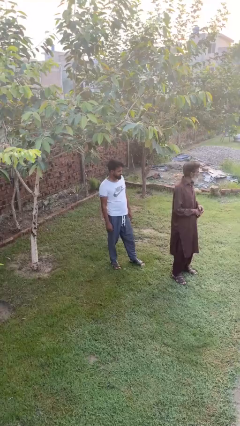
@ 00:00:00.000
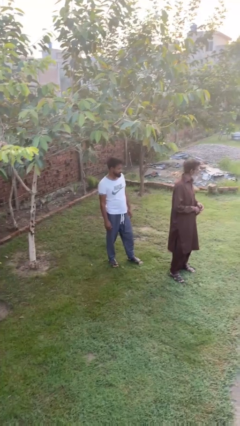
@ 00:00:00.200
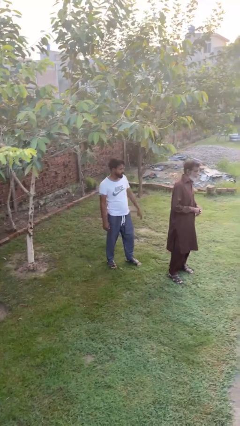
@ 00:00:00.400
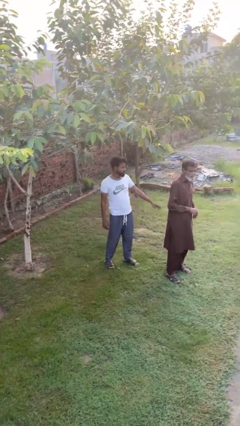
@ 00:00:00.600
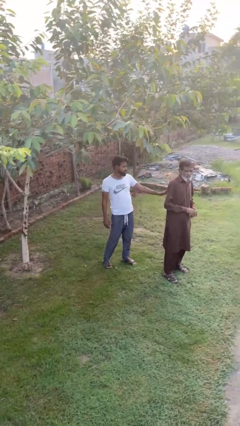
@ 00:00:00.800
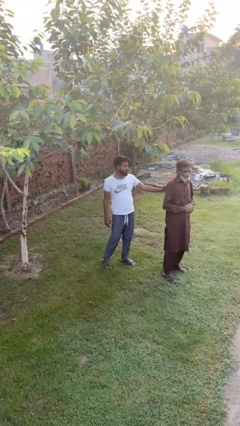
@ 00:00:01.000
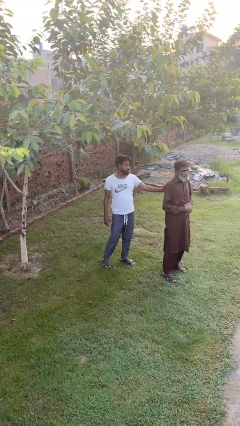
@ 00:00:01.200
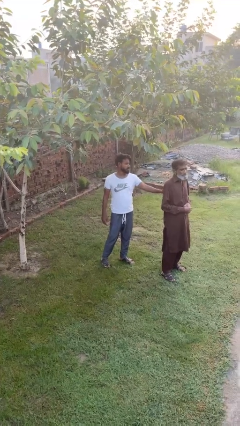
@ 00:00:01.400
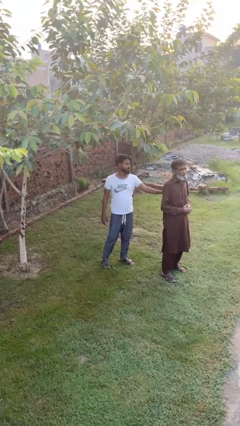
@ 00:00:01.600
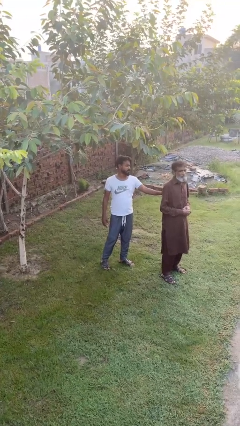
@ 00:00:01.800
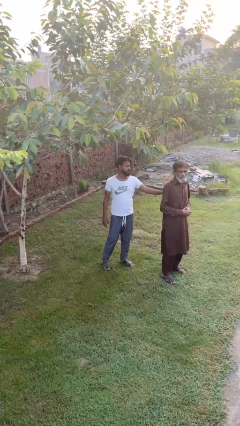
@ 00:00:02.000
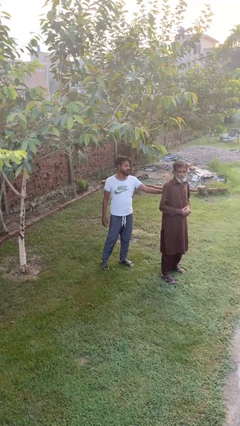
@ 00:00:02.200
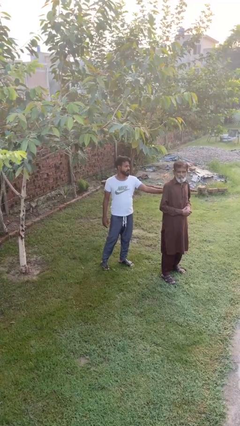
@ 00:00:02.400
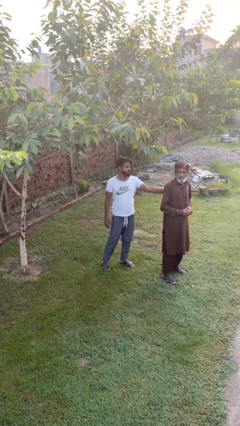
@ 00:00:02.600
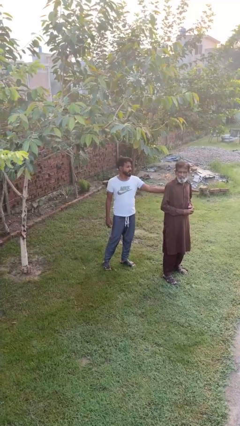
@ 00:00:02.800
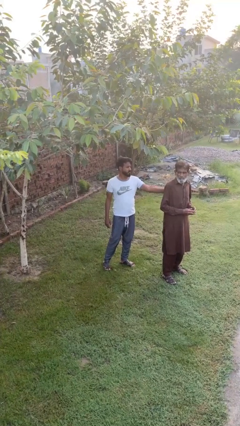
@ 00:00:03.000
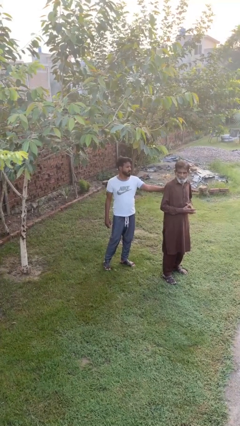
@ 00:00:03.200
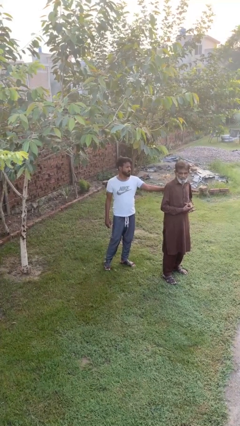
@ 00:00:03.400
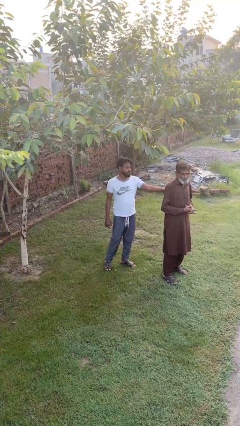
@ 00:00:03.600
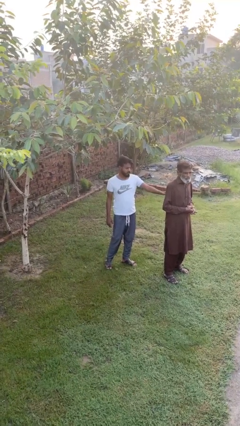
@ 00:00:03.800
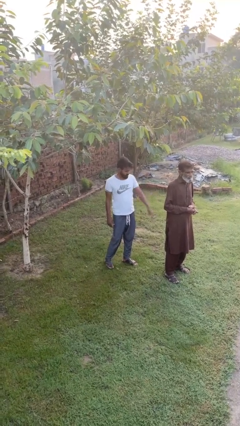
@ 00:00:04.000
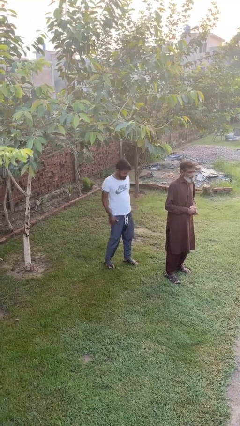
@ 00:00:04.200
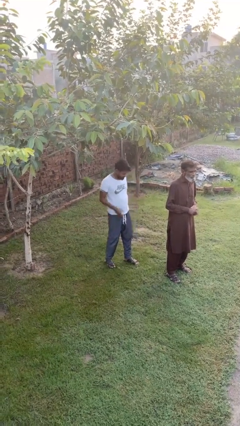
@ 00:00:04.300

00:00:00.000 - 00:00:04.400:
person touches back of person

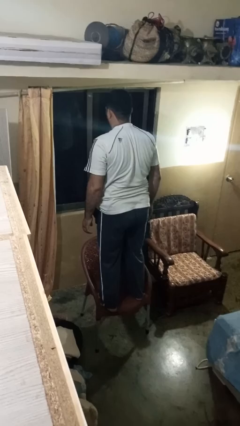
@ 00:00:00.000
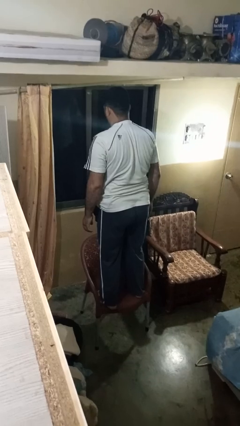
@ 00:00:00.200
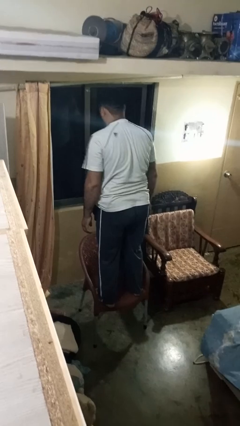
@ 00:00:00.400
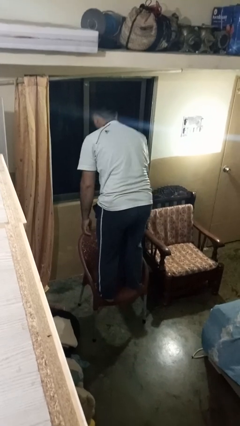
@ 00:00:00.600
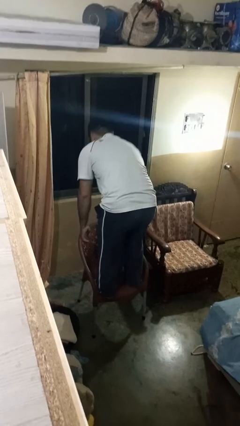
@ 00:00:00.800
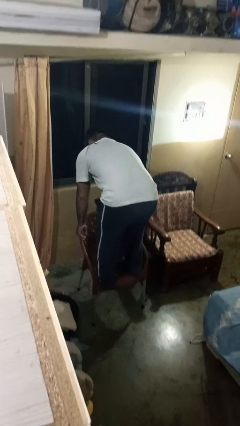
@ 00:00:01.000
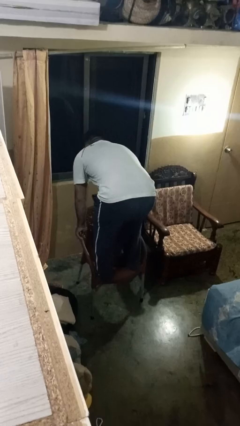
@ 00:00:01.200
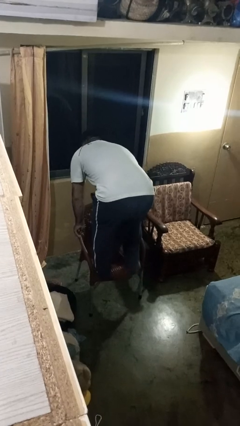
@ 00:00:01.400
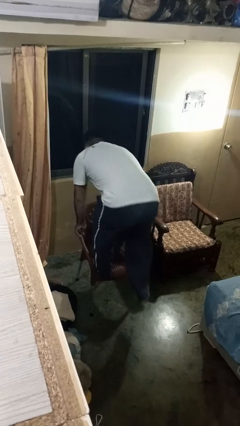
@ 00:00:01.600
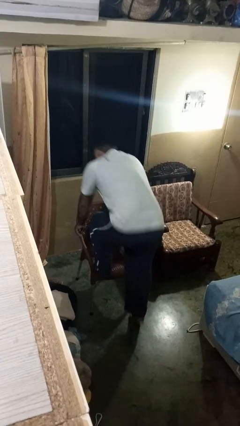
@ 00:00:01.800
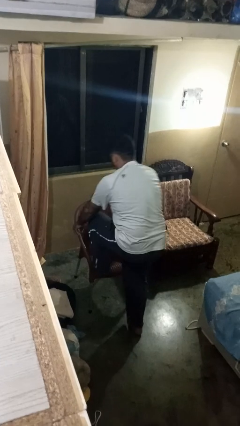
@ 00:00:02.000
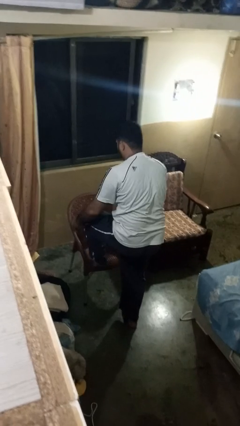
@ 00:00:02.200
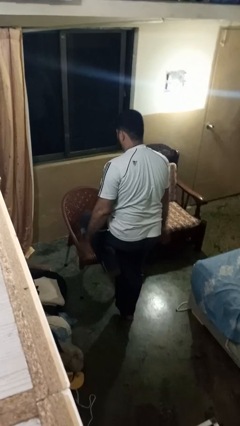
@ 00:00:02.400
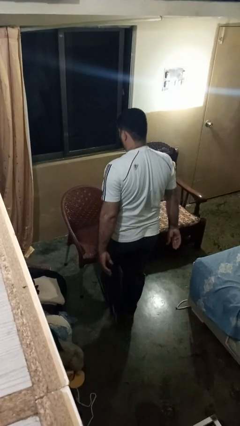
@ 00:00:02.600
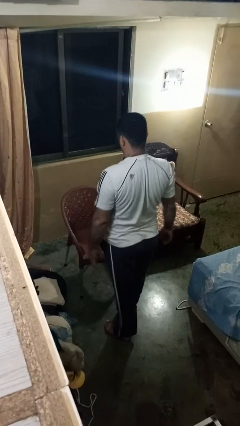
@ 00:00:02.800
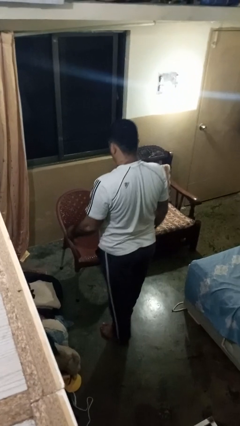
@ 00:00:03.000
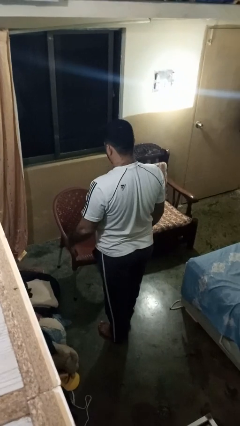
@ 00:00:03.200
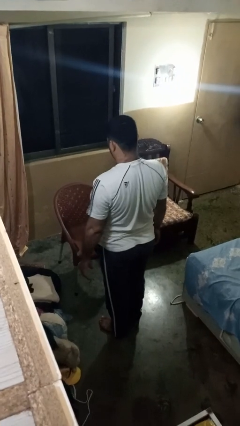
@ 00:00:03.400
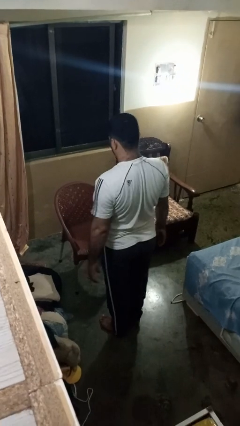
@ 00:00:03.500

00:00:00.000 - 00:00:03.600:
person climbs off chair

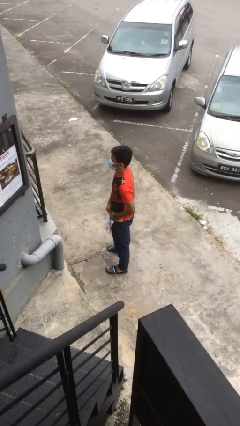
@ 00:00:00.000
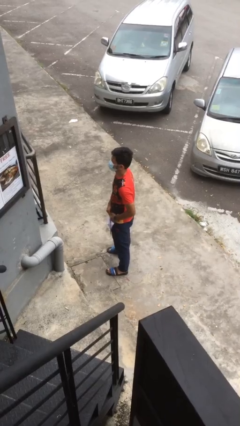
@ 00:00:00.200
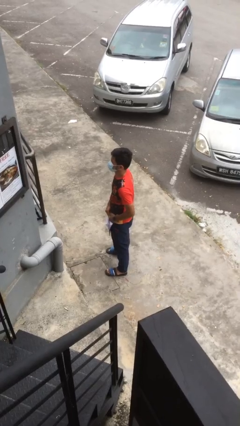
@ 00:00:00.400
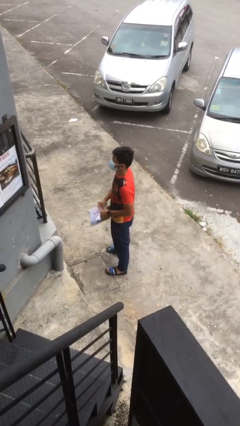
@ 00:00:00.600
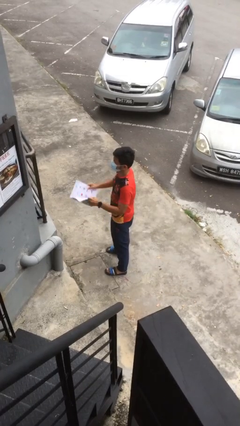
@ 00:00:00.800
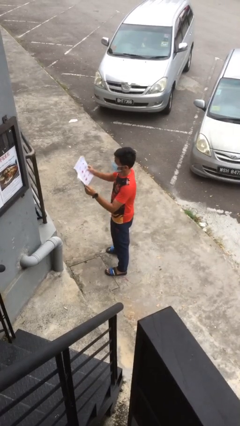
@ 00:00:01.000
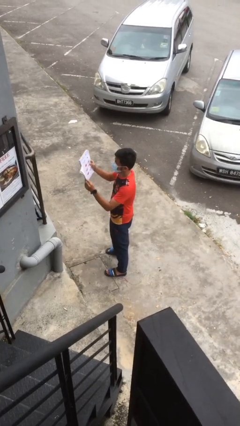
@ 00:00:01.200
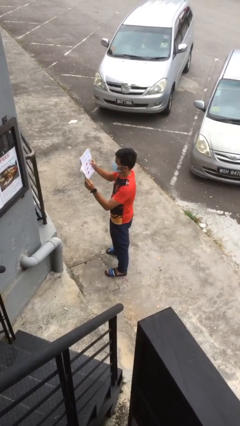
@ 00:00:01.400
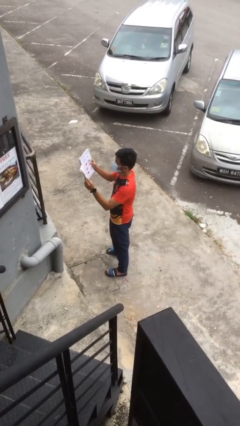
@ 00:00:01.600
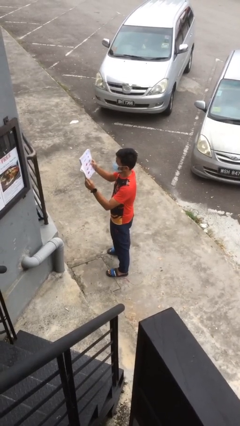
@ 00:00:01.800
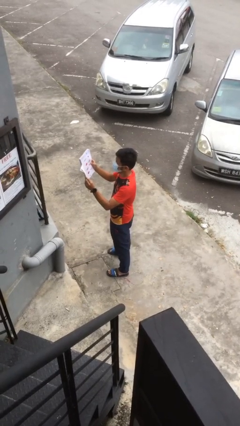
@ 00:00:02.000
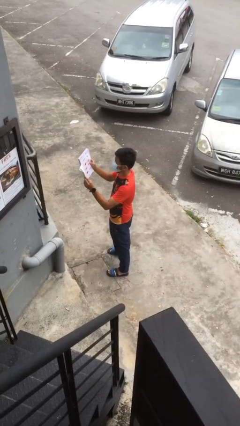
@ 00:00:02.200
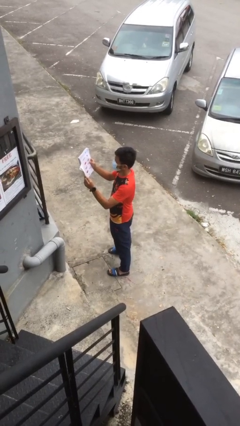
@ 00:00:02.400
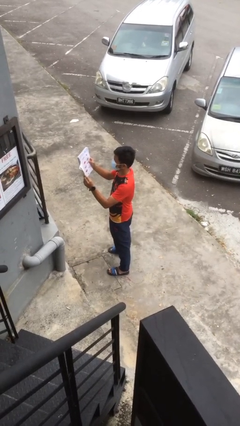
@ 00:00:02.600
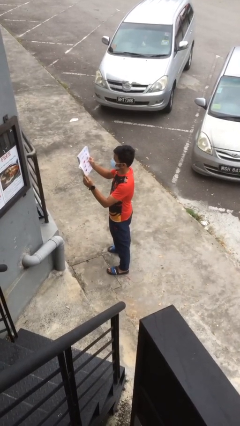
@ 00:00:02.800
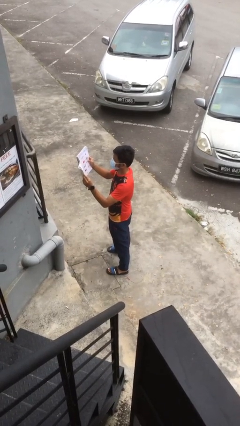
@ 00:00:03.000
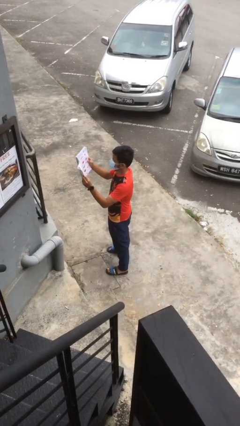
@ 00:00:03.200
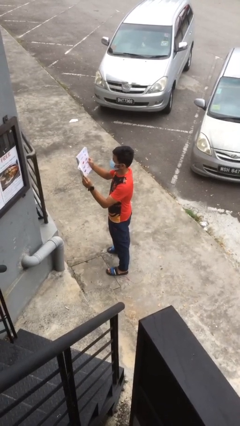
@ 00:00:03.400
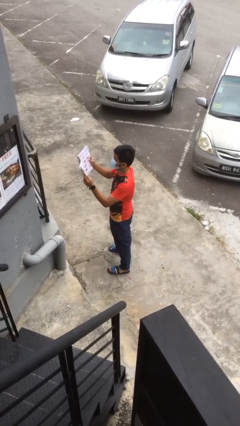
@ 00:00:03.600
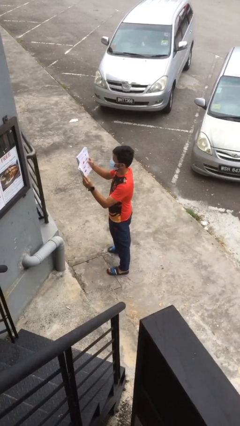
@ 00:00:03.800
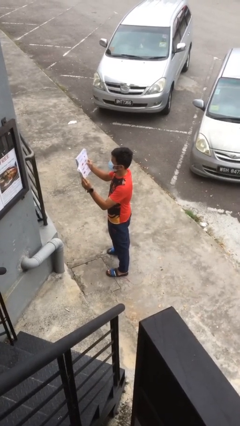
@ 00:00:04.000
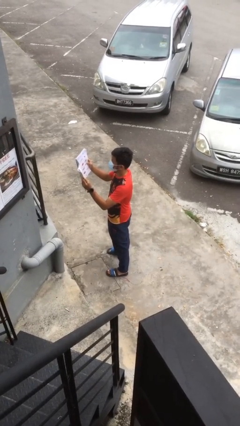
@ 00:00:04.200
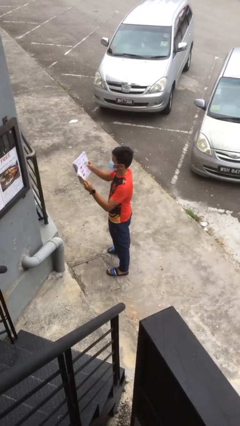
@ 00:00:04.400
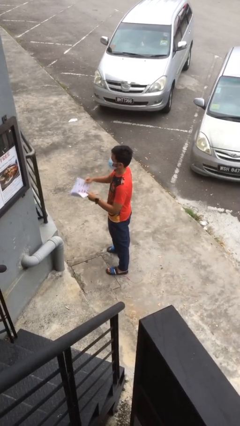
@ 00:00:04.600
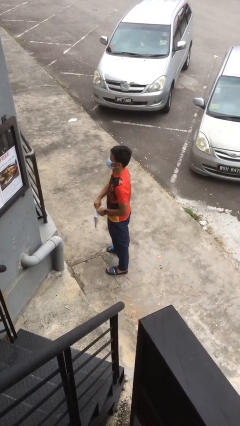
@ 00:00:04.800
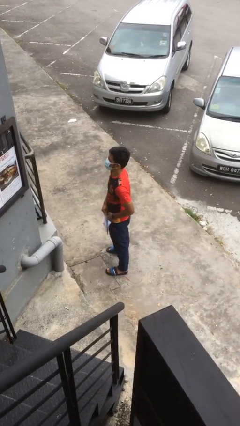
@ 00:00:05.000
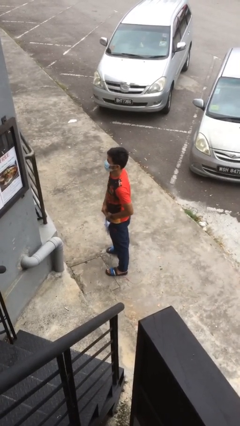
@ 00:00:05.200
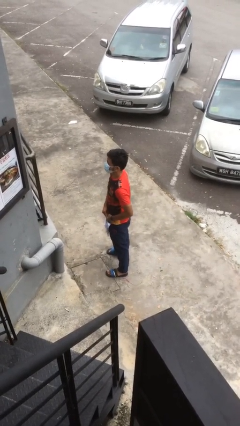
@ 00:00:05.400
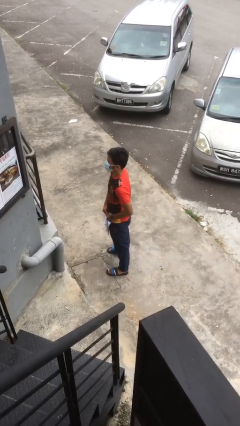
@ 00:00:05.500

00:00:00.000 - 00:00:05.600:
person reads document

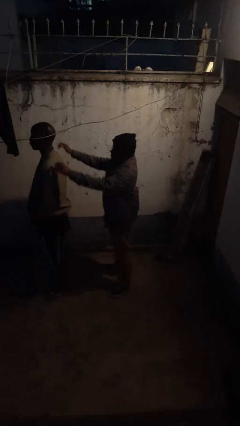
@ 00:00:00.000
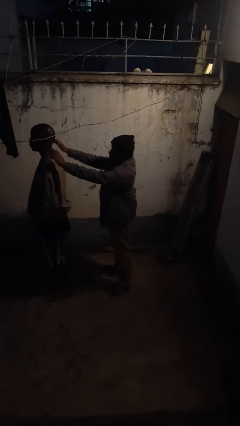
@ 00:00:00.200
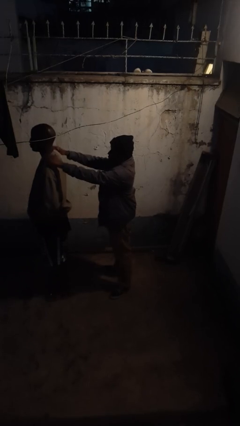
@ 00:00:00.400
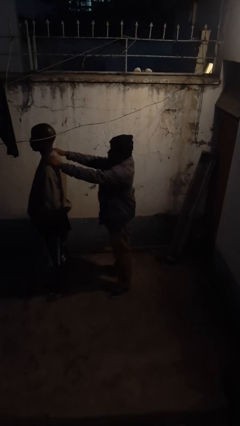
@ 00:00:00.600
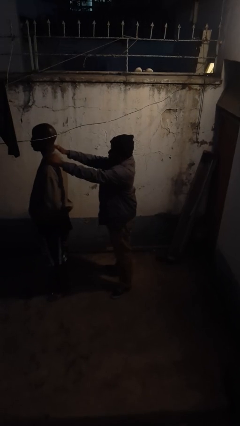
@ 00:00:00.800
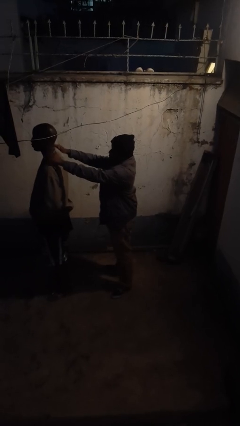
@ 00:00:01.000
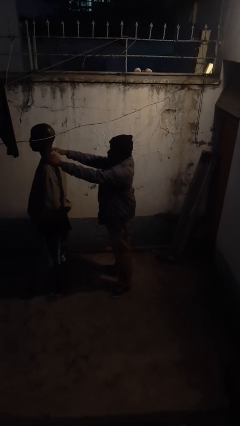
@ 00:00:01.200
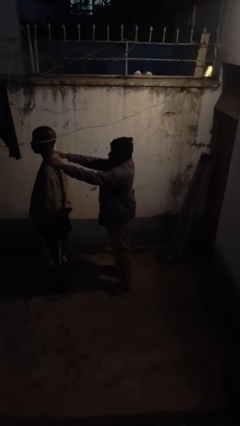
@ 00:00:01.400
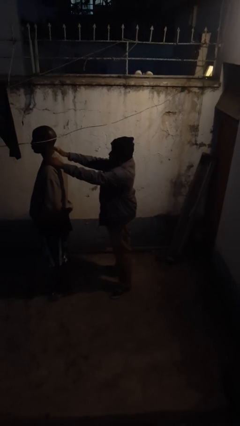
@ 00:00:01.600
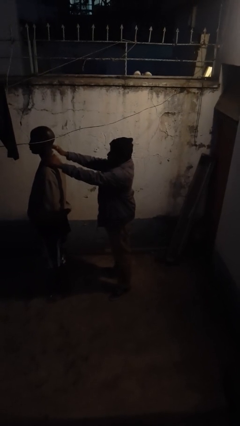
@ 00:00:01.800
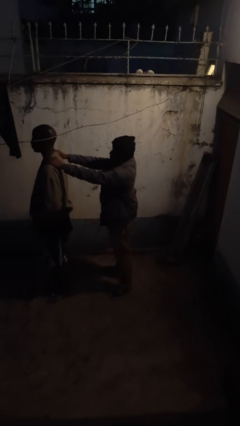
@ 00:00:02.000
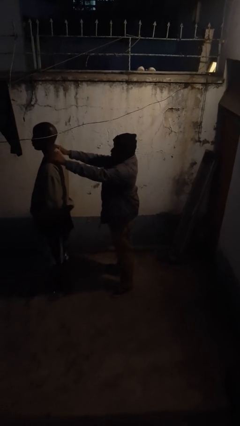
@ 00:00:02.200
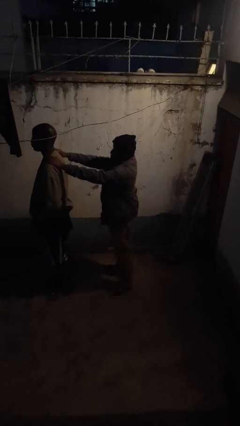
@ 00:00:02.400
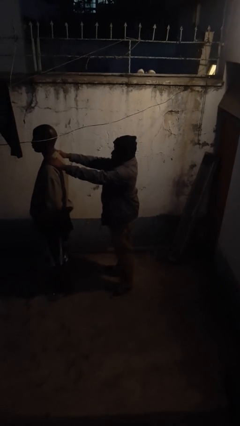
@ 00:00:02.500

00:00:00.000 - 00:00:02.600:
person pounds shoulders of person

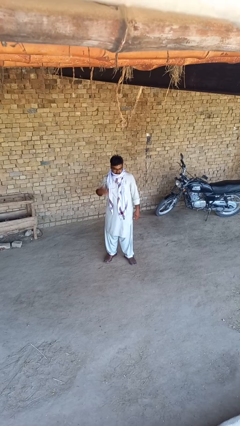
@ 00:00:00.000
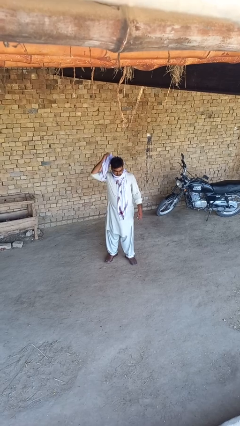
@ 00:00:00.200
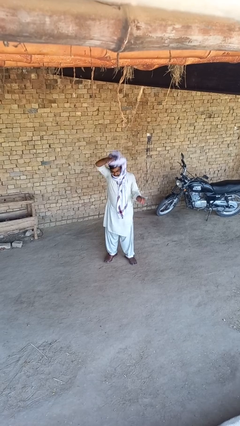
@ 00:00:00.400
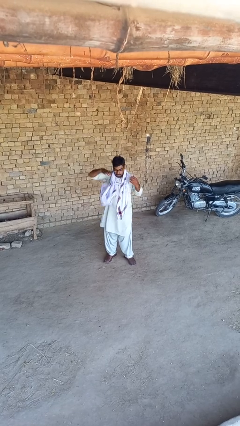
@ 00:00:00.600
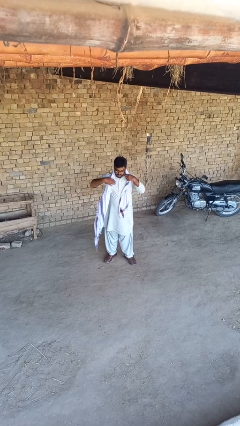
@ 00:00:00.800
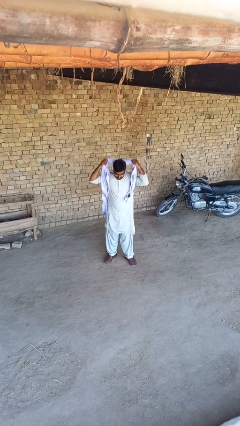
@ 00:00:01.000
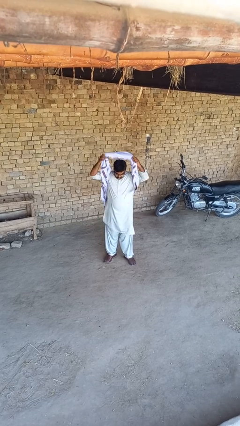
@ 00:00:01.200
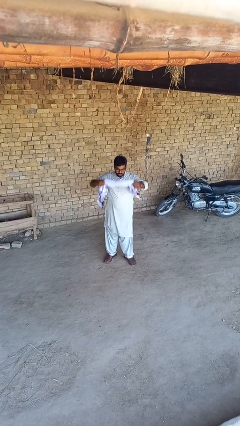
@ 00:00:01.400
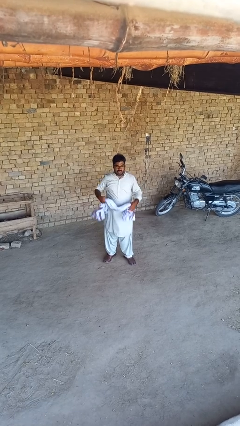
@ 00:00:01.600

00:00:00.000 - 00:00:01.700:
person takes off scarf
